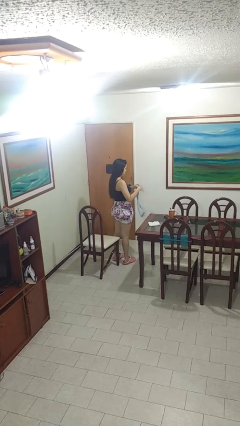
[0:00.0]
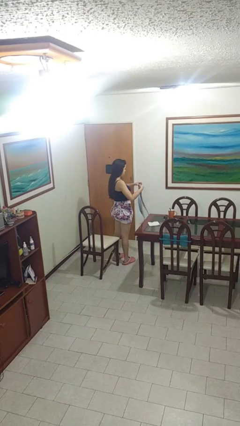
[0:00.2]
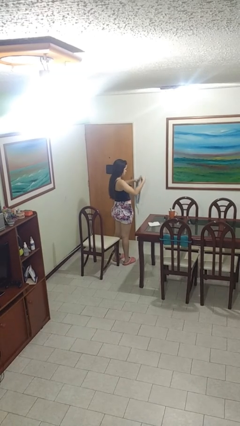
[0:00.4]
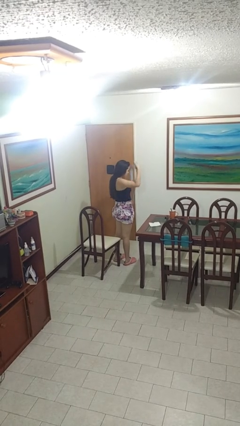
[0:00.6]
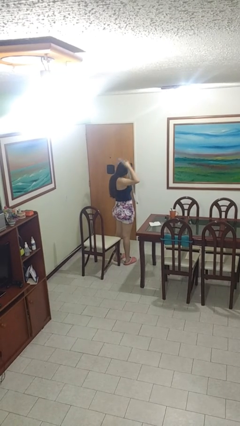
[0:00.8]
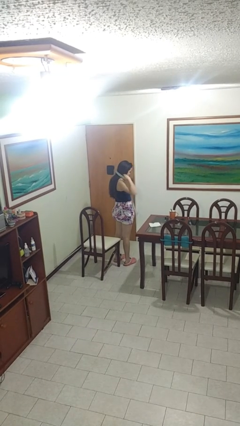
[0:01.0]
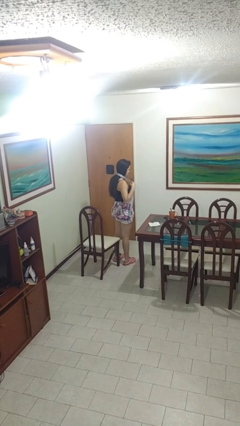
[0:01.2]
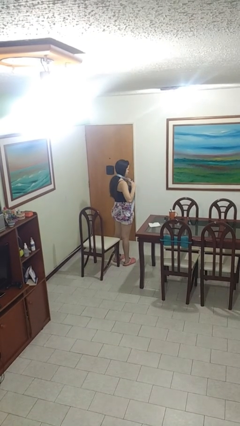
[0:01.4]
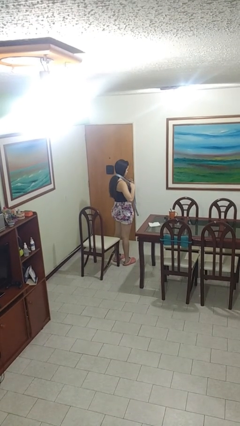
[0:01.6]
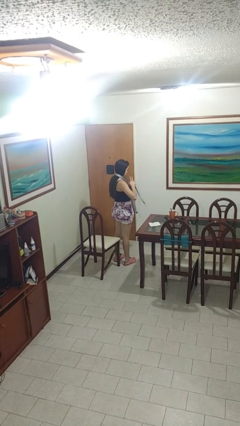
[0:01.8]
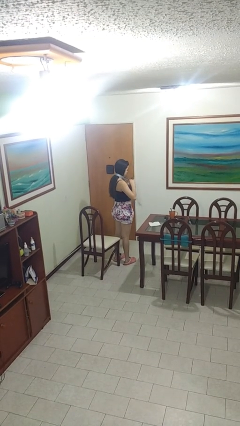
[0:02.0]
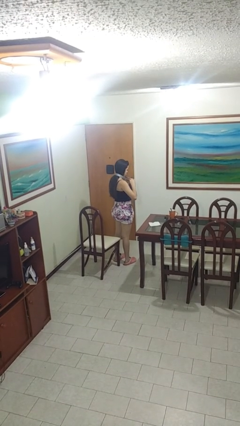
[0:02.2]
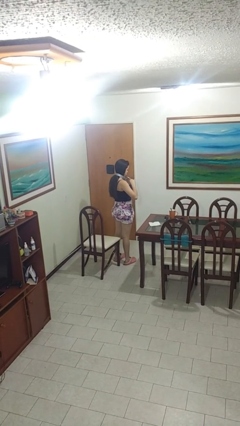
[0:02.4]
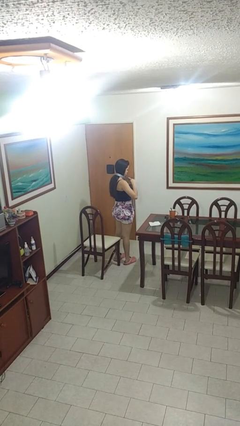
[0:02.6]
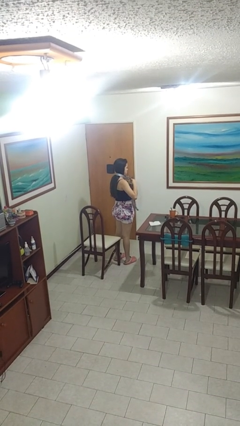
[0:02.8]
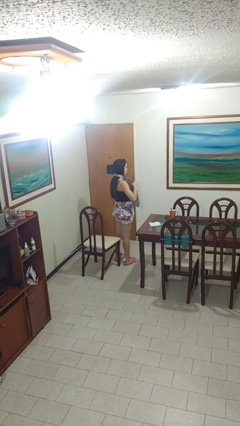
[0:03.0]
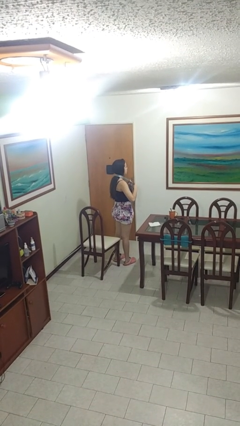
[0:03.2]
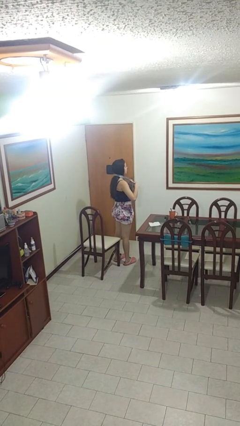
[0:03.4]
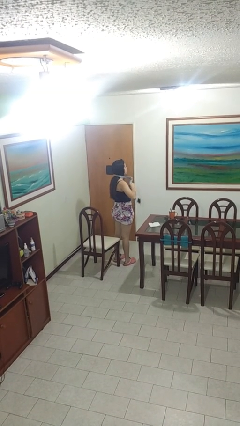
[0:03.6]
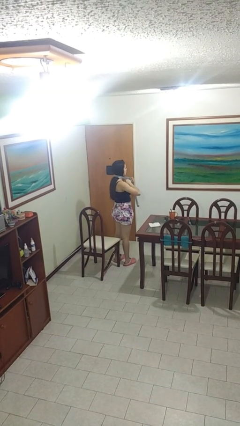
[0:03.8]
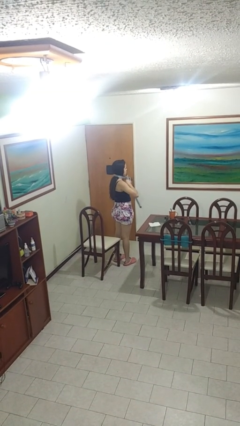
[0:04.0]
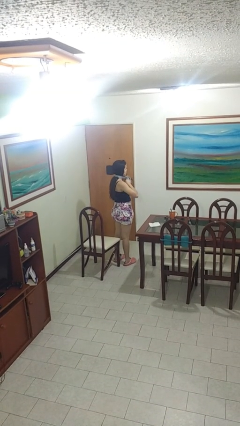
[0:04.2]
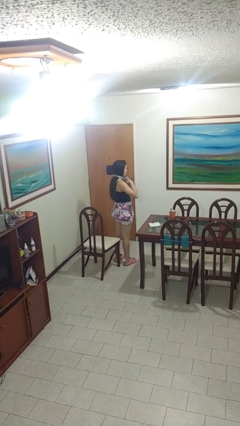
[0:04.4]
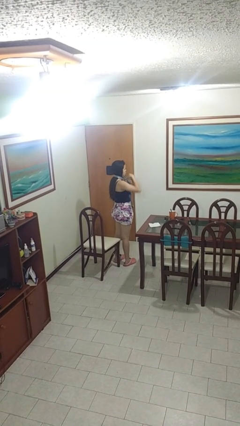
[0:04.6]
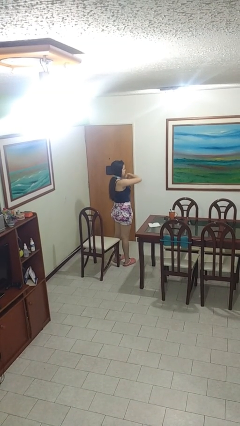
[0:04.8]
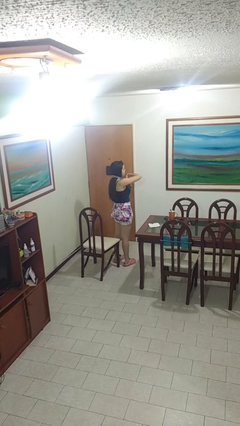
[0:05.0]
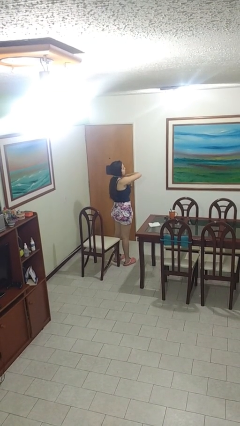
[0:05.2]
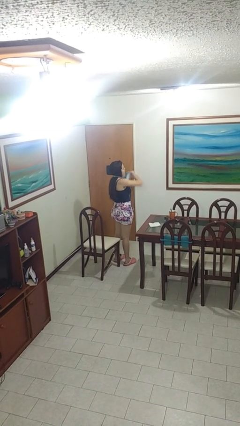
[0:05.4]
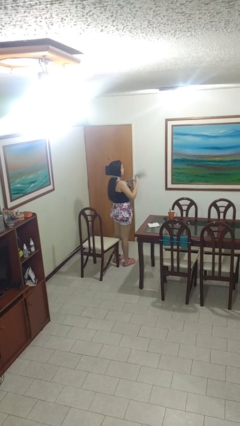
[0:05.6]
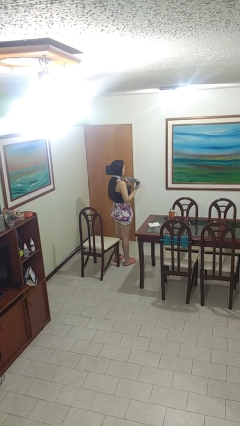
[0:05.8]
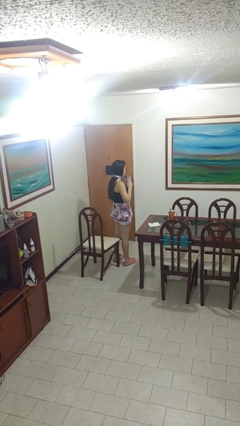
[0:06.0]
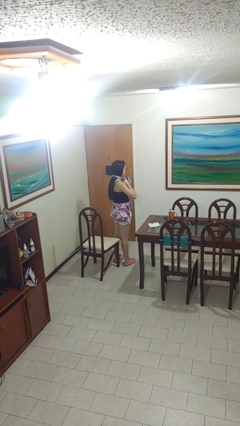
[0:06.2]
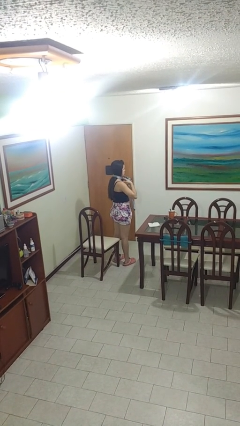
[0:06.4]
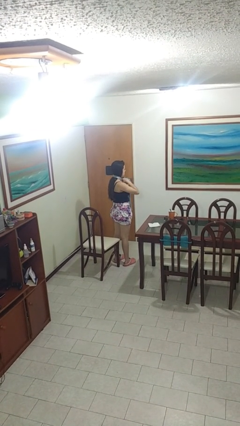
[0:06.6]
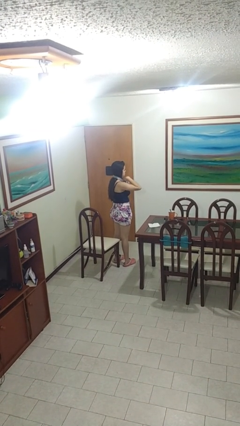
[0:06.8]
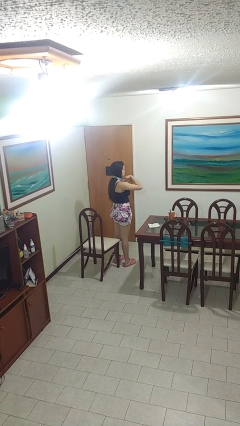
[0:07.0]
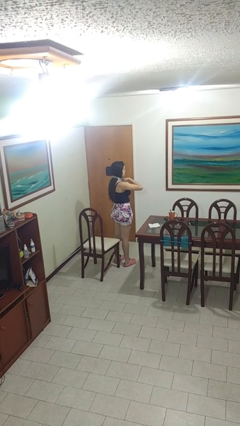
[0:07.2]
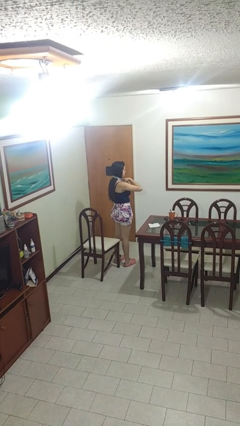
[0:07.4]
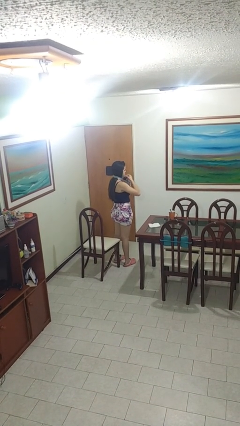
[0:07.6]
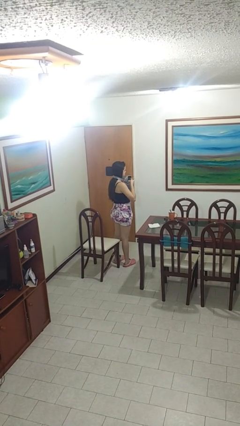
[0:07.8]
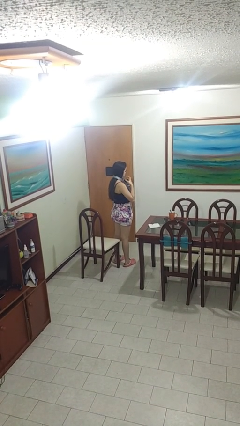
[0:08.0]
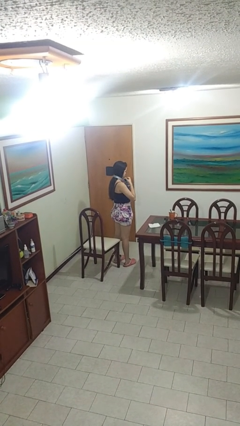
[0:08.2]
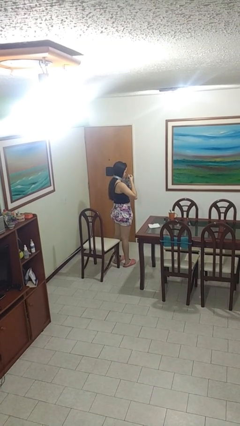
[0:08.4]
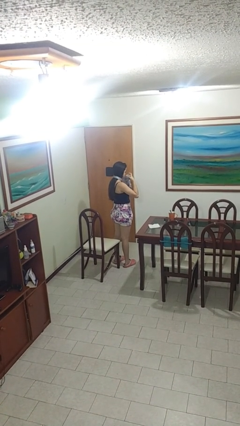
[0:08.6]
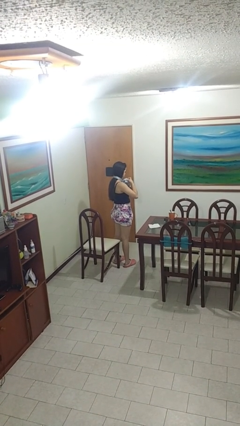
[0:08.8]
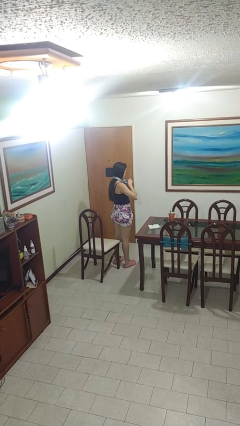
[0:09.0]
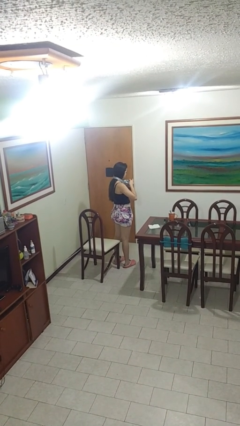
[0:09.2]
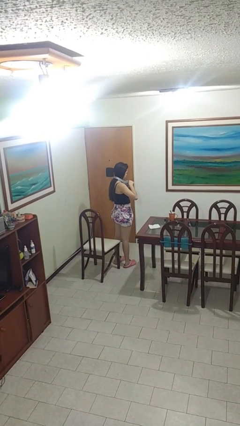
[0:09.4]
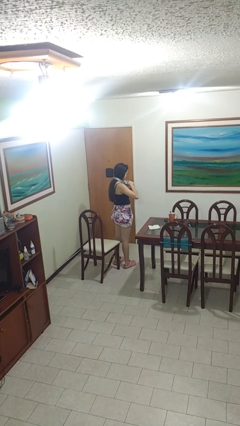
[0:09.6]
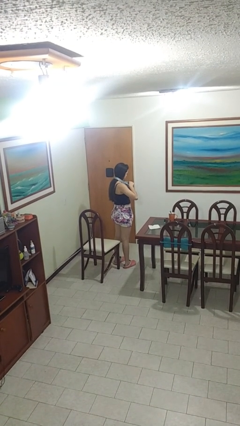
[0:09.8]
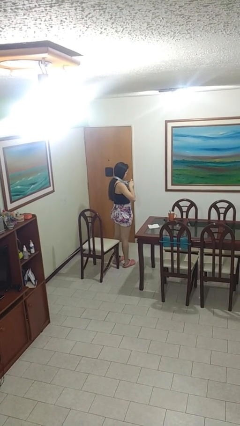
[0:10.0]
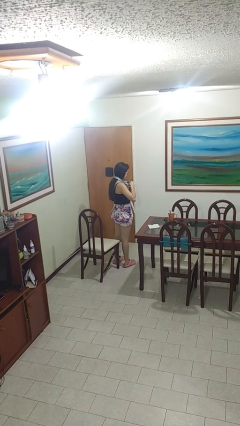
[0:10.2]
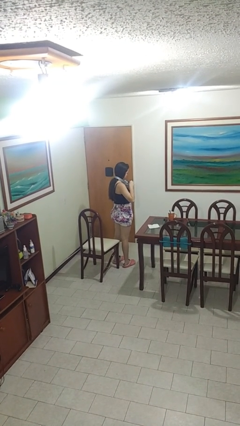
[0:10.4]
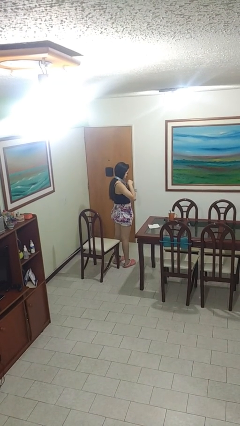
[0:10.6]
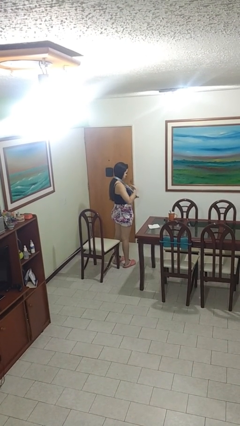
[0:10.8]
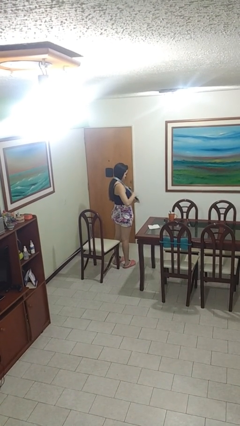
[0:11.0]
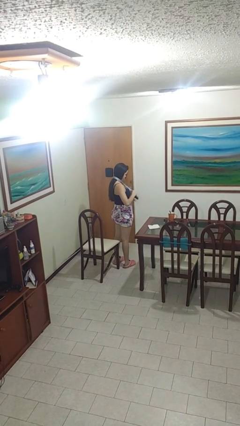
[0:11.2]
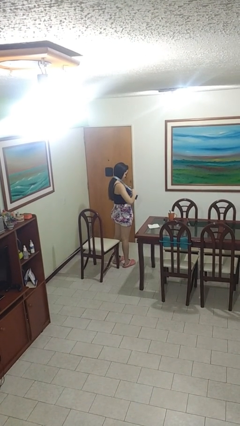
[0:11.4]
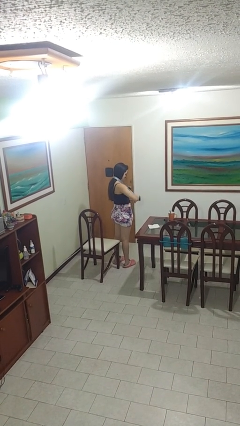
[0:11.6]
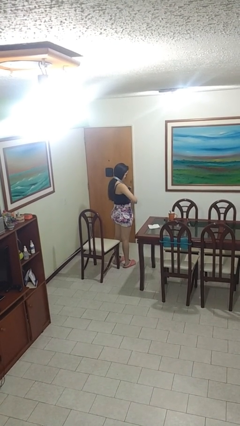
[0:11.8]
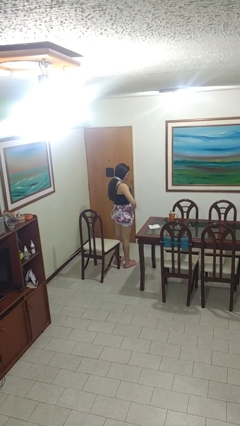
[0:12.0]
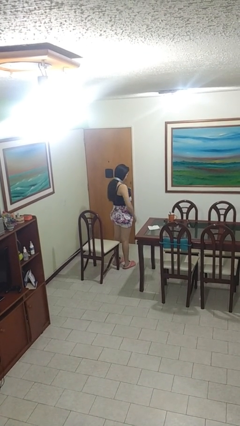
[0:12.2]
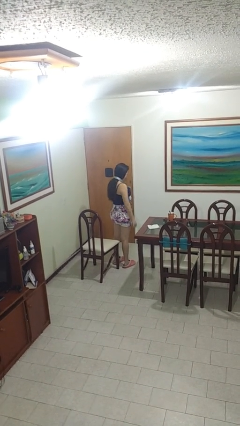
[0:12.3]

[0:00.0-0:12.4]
person puts on necktie

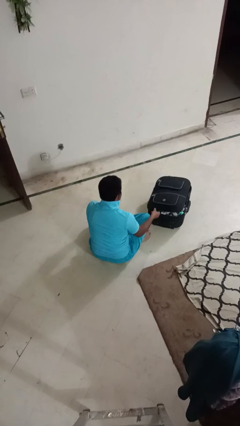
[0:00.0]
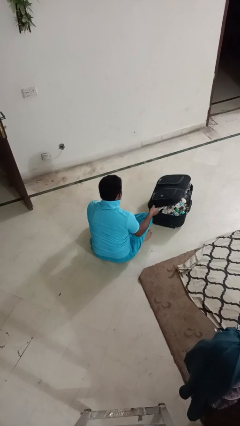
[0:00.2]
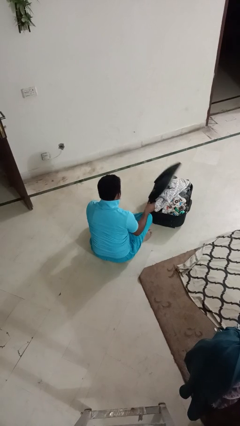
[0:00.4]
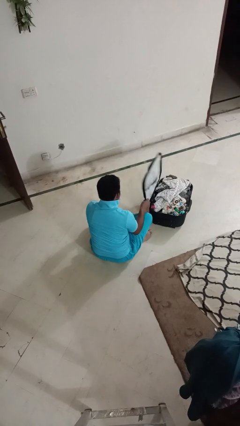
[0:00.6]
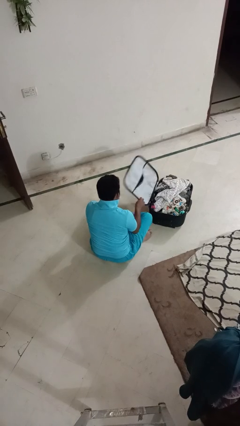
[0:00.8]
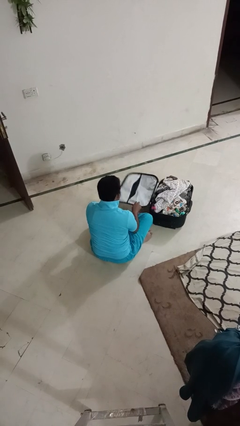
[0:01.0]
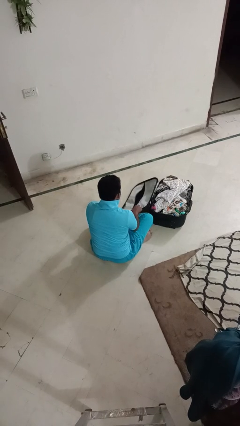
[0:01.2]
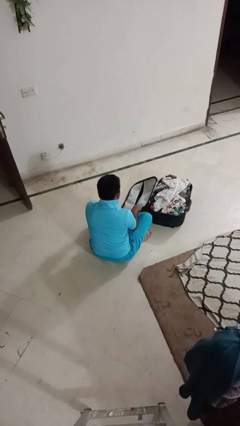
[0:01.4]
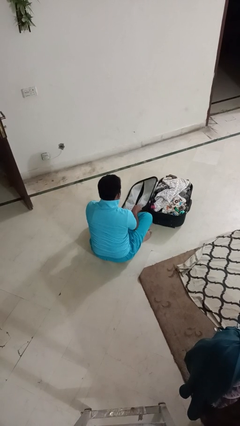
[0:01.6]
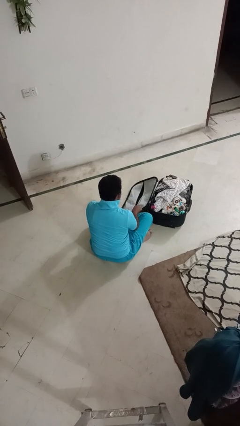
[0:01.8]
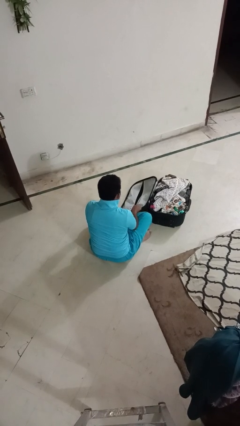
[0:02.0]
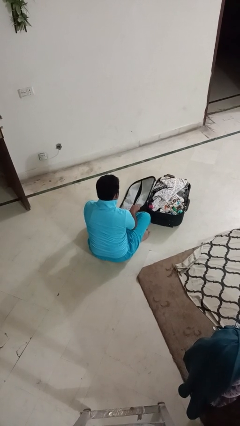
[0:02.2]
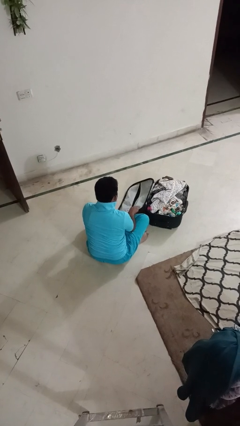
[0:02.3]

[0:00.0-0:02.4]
person opens suitcase

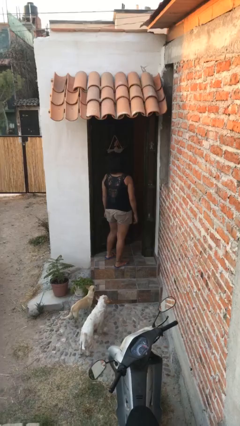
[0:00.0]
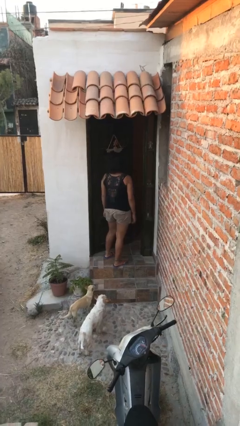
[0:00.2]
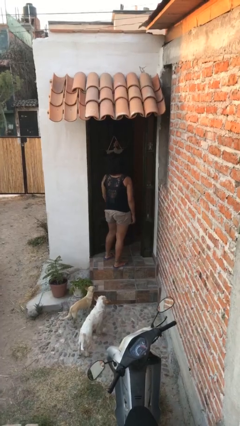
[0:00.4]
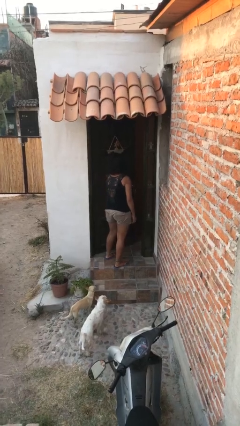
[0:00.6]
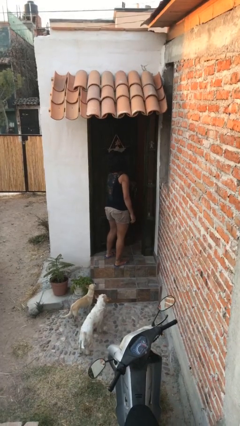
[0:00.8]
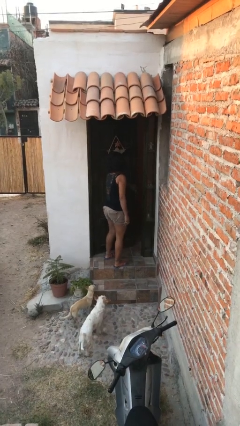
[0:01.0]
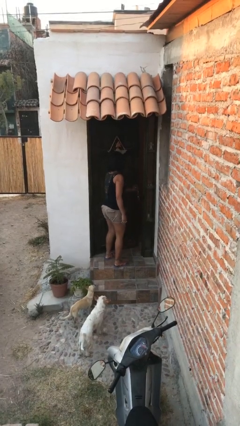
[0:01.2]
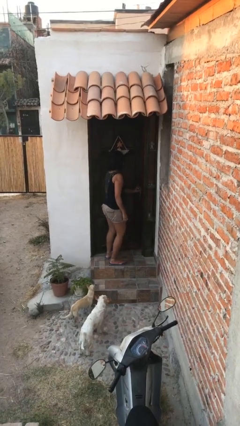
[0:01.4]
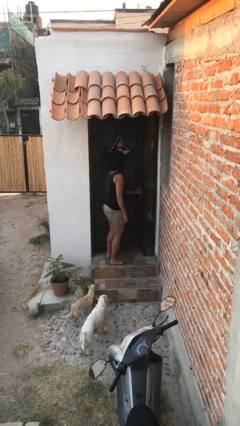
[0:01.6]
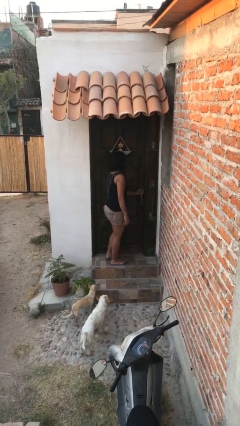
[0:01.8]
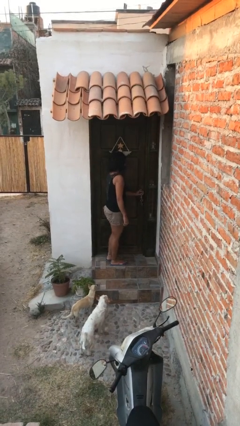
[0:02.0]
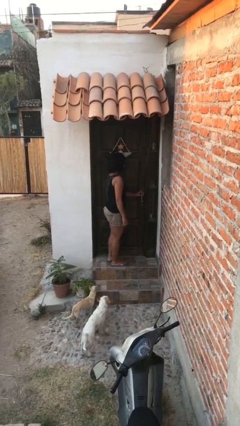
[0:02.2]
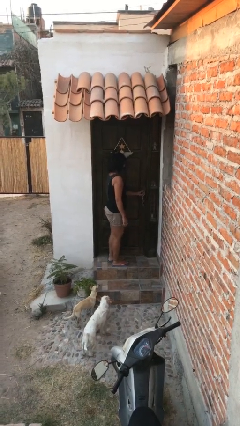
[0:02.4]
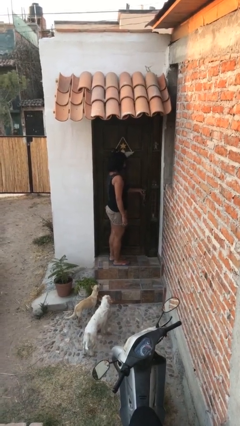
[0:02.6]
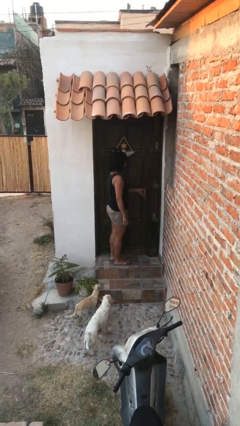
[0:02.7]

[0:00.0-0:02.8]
person closes facility door
